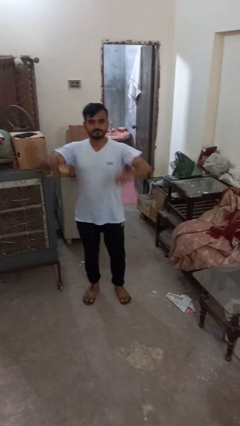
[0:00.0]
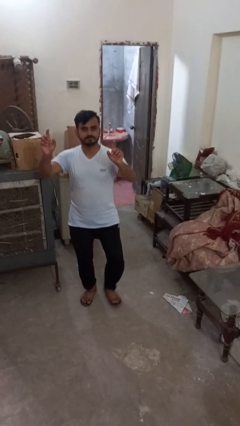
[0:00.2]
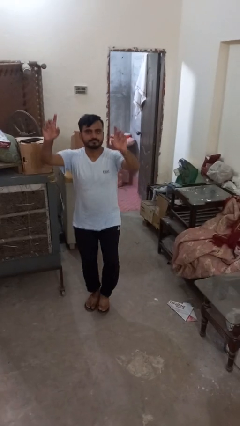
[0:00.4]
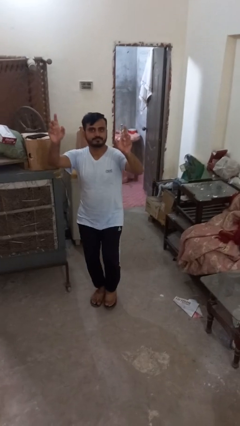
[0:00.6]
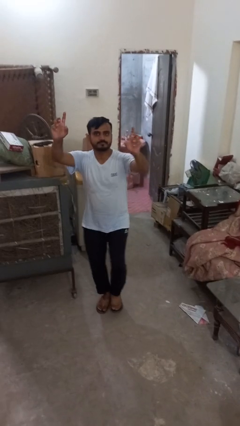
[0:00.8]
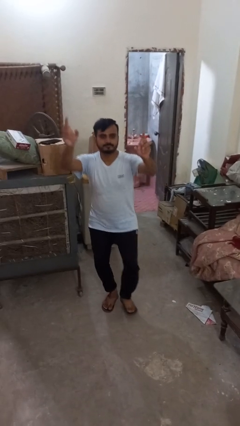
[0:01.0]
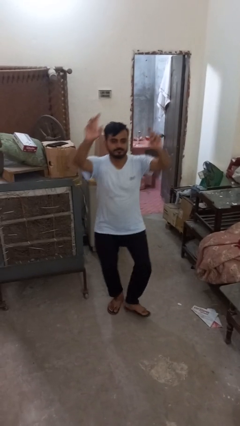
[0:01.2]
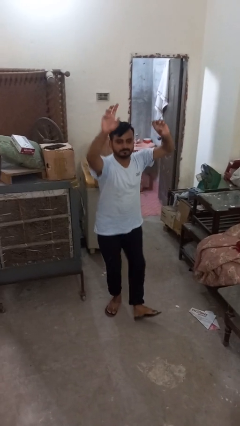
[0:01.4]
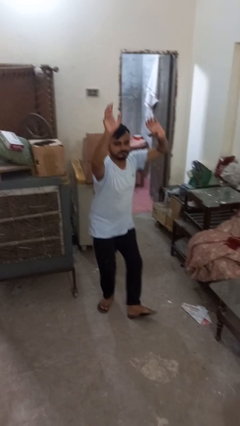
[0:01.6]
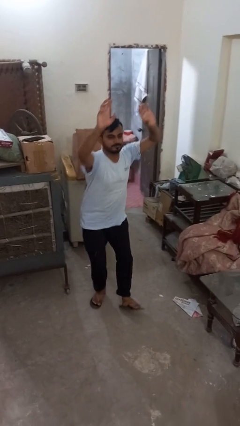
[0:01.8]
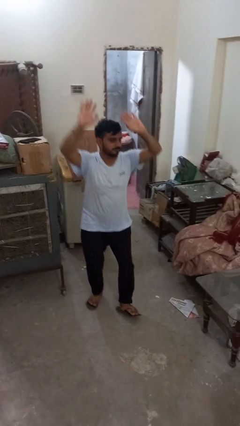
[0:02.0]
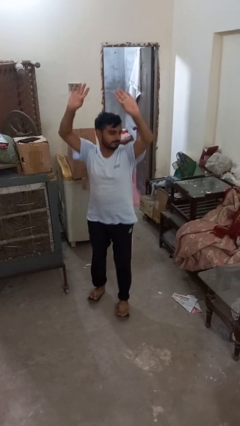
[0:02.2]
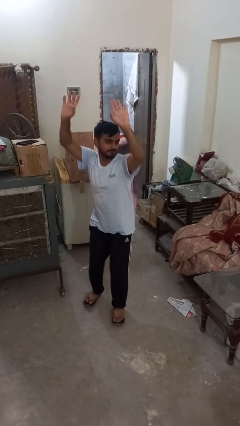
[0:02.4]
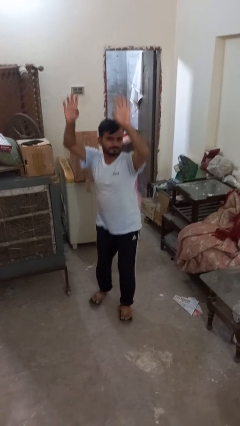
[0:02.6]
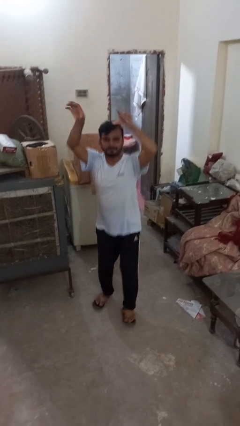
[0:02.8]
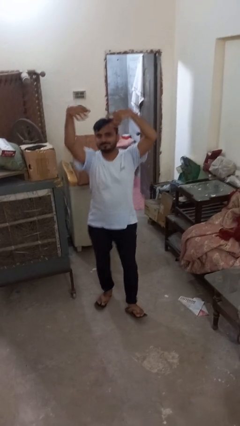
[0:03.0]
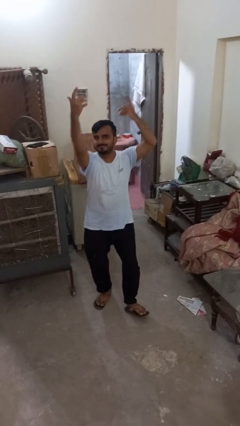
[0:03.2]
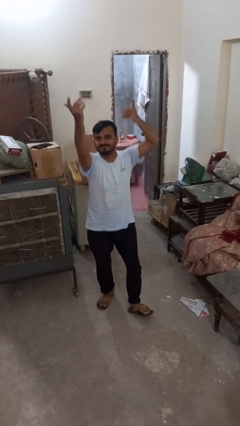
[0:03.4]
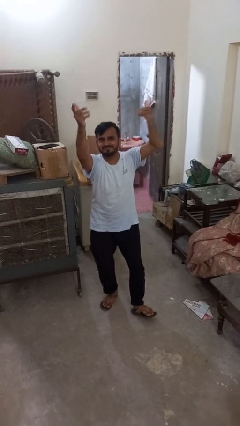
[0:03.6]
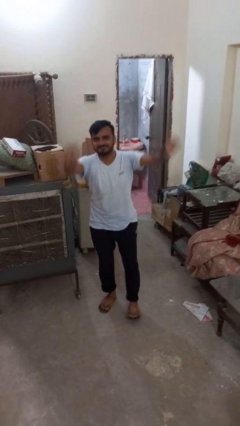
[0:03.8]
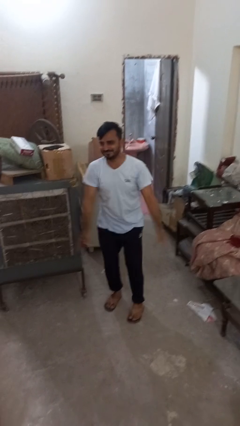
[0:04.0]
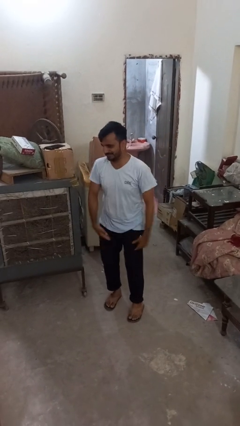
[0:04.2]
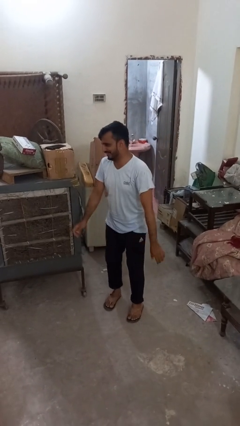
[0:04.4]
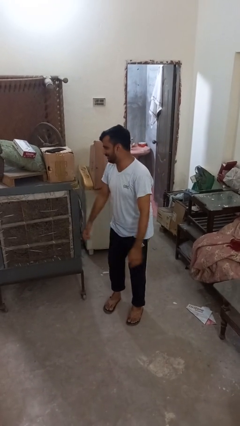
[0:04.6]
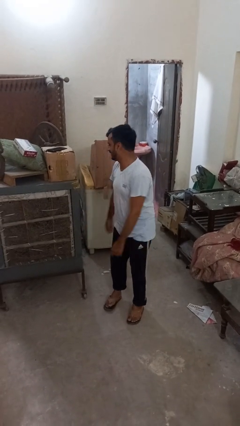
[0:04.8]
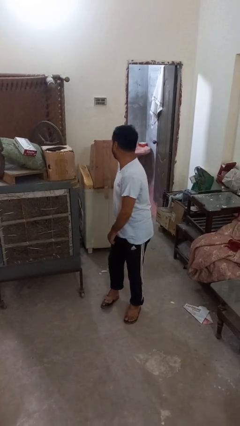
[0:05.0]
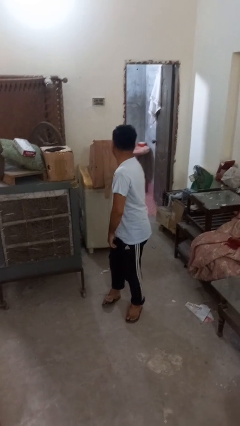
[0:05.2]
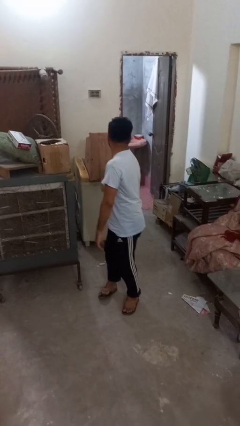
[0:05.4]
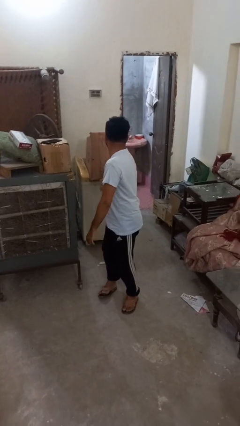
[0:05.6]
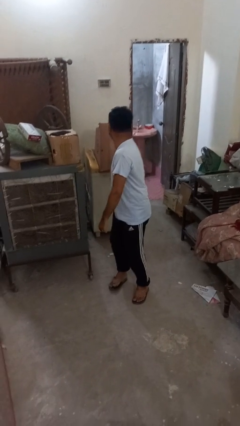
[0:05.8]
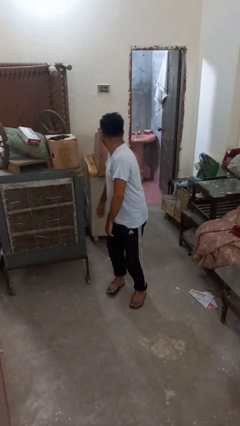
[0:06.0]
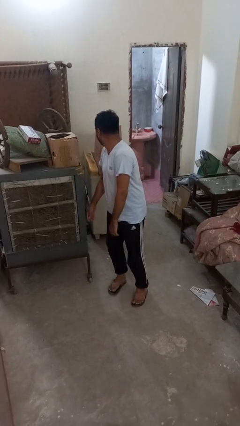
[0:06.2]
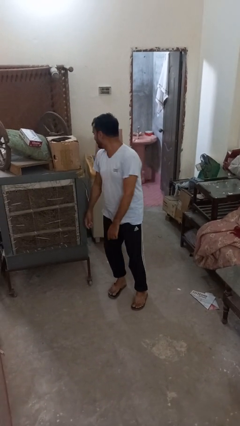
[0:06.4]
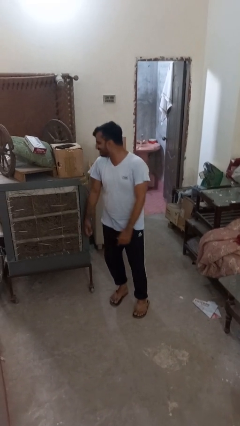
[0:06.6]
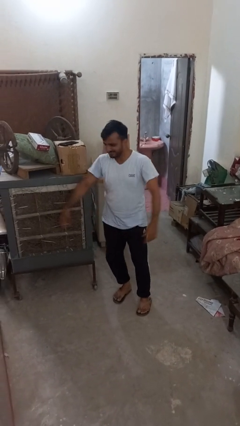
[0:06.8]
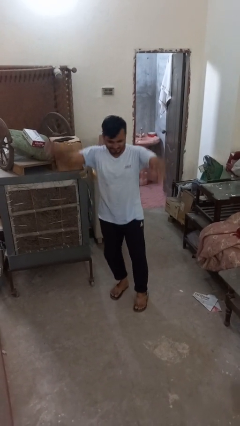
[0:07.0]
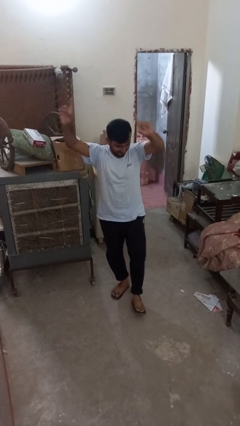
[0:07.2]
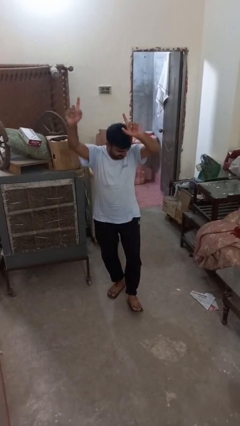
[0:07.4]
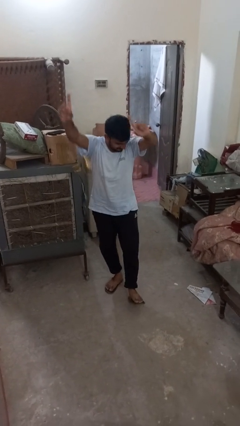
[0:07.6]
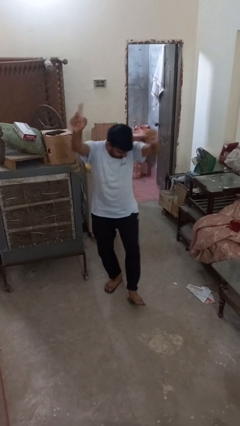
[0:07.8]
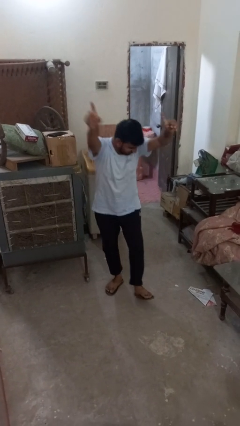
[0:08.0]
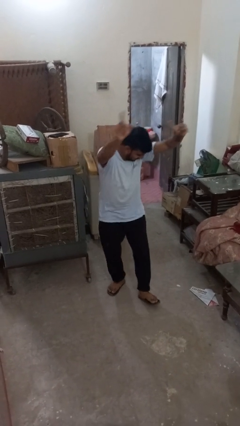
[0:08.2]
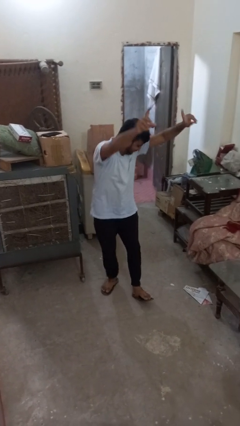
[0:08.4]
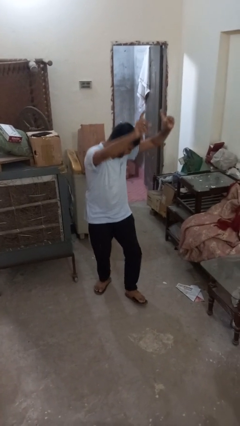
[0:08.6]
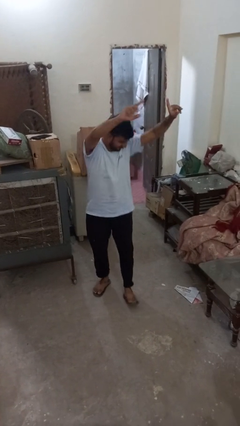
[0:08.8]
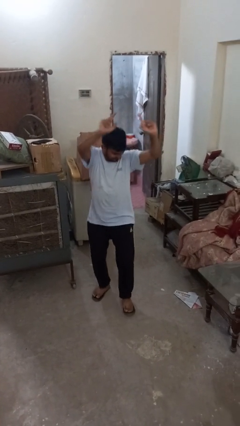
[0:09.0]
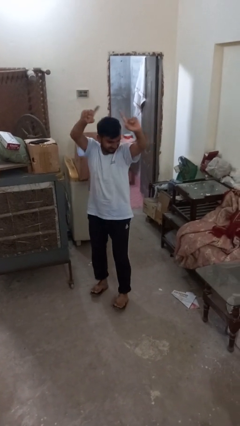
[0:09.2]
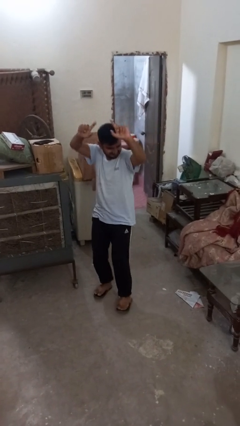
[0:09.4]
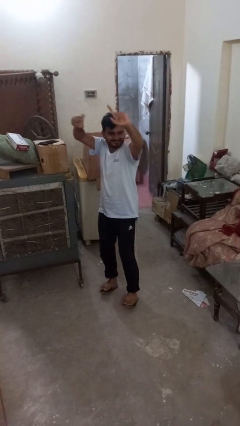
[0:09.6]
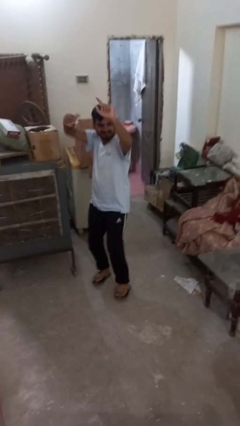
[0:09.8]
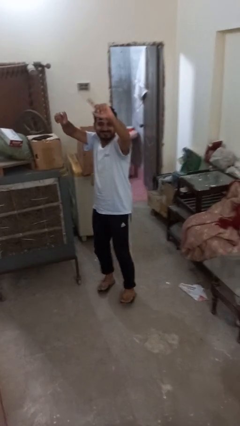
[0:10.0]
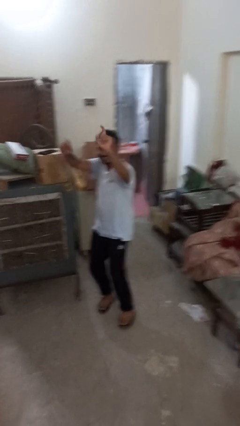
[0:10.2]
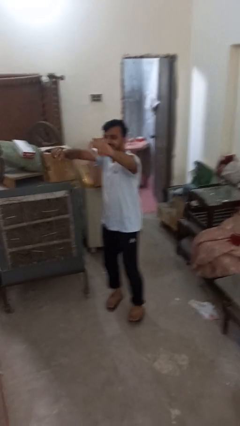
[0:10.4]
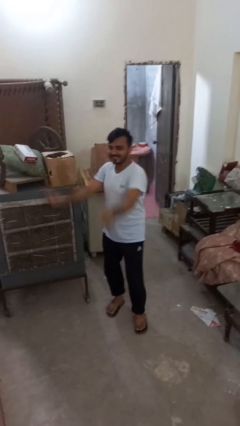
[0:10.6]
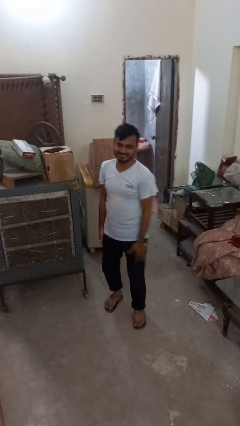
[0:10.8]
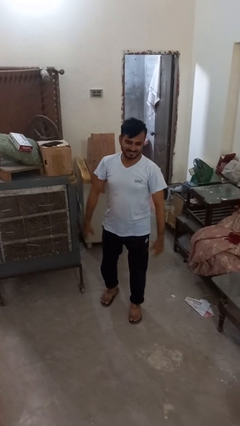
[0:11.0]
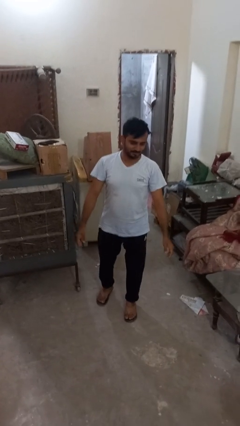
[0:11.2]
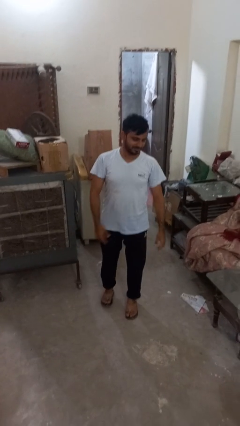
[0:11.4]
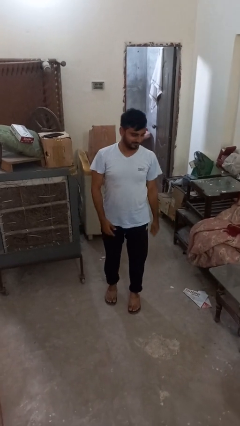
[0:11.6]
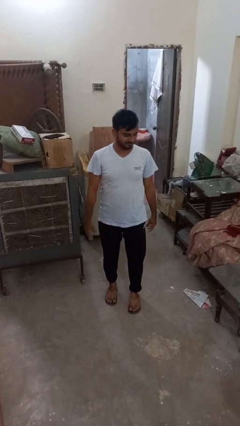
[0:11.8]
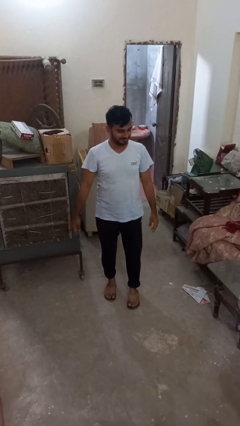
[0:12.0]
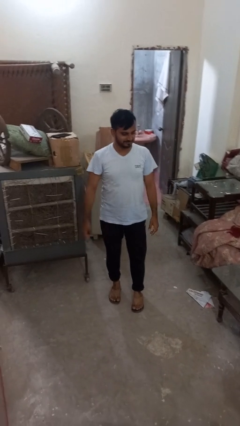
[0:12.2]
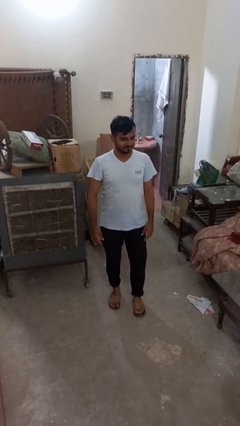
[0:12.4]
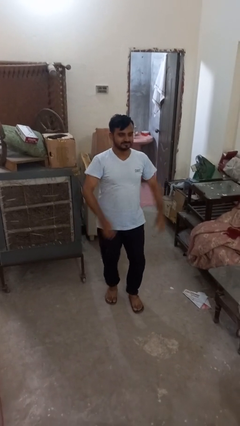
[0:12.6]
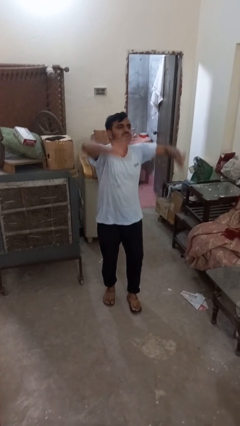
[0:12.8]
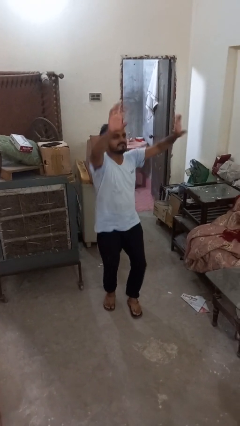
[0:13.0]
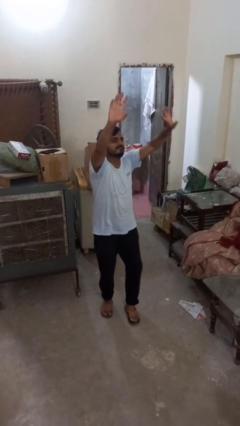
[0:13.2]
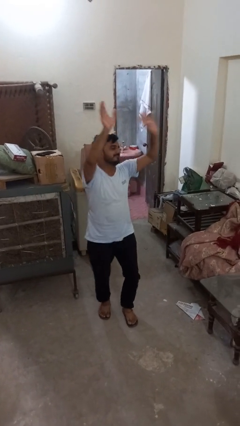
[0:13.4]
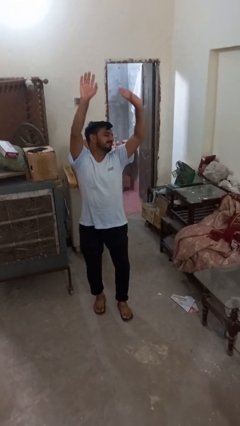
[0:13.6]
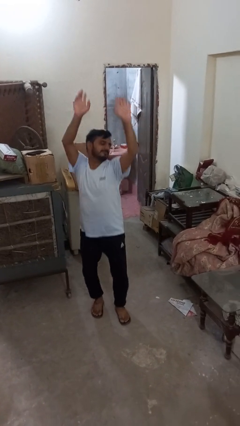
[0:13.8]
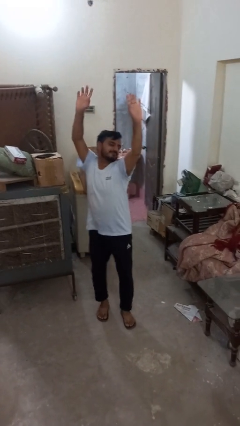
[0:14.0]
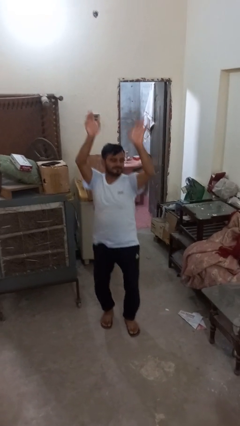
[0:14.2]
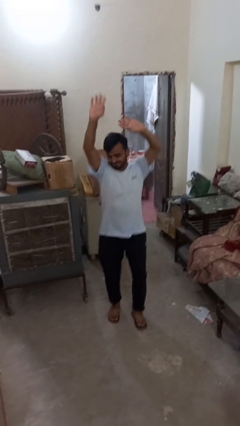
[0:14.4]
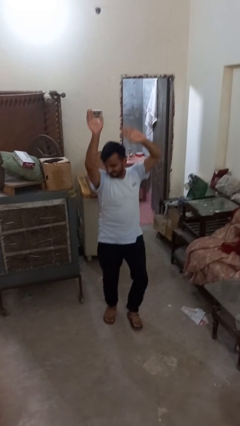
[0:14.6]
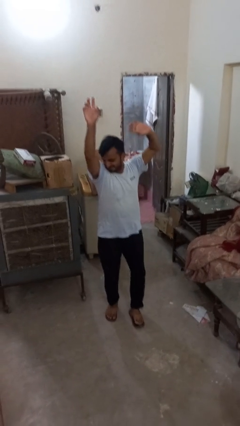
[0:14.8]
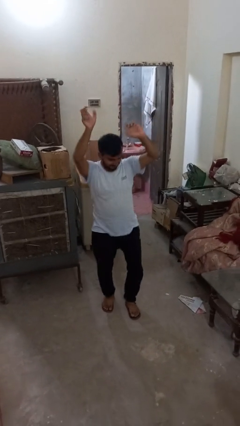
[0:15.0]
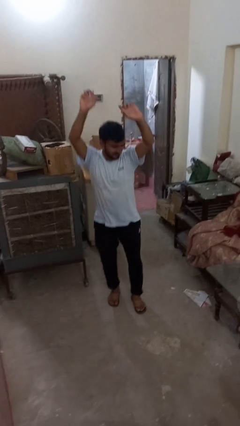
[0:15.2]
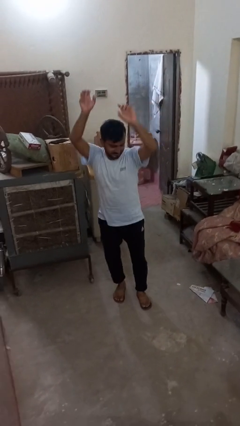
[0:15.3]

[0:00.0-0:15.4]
person dances in place

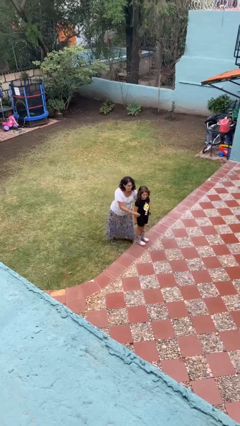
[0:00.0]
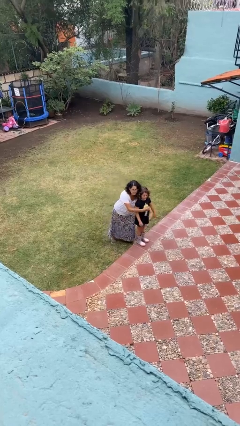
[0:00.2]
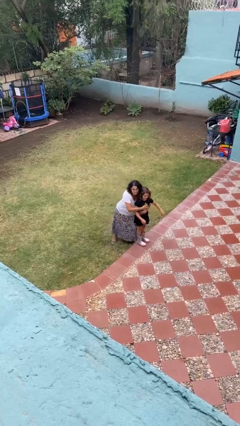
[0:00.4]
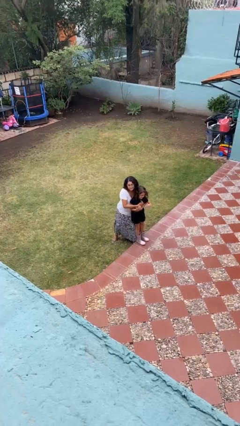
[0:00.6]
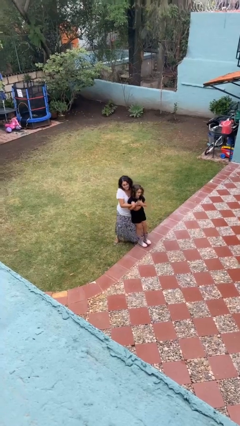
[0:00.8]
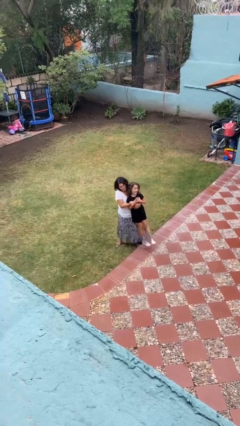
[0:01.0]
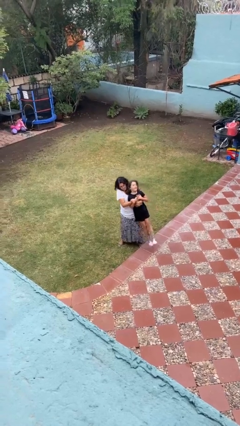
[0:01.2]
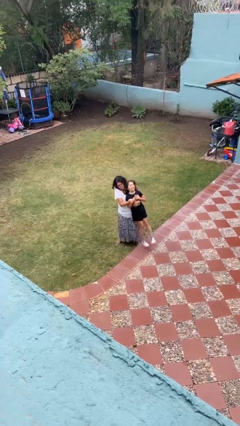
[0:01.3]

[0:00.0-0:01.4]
person picks up person

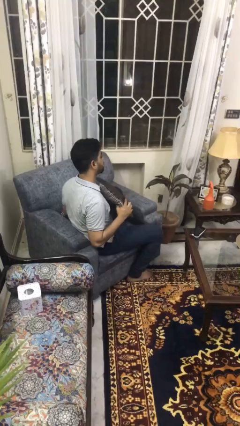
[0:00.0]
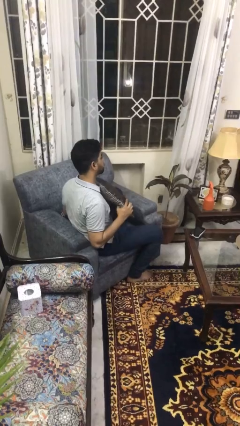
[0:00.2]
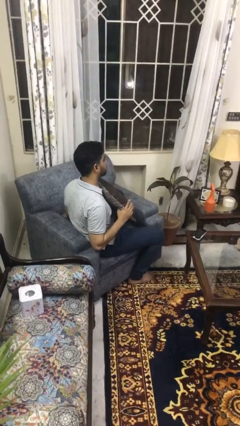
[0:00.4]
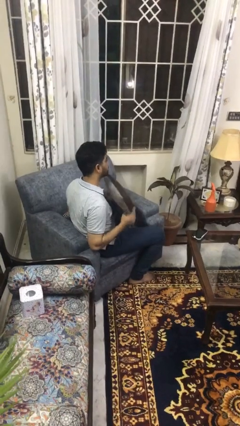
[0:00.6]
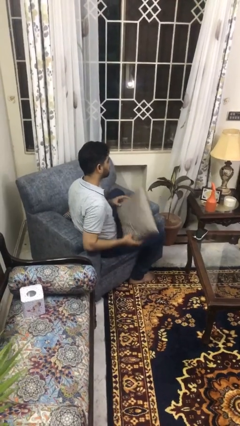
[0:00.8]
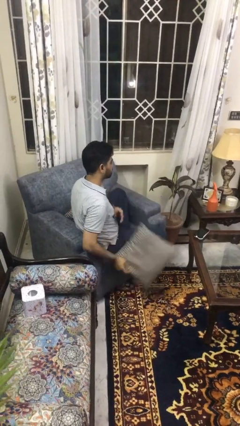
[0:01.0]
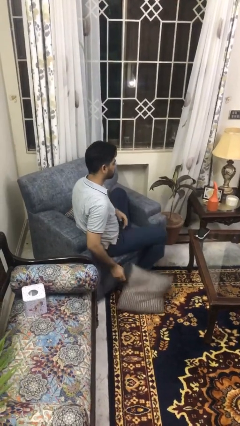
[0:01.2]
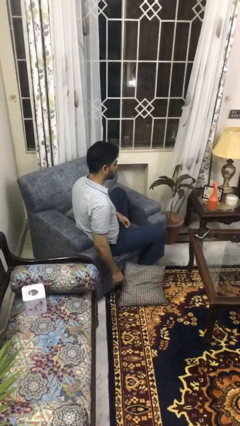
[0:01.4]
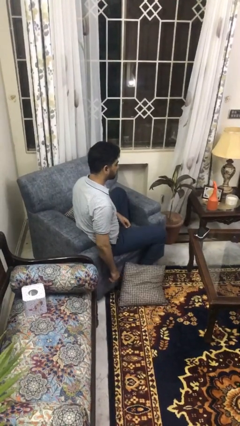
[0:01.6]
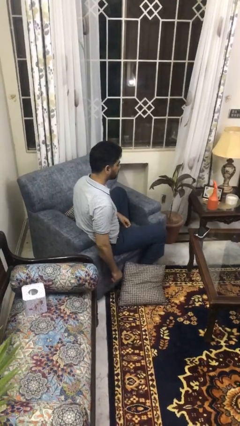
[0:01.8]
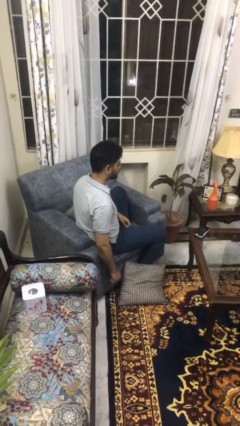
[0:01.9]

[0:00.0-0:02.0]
person throws object to ground
